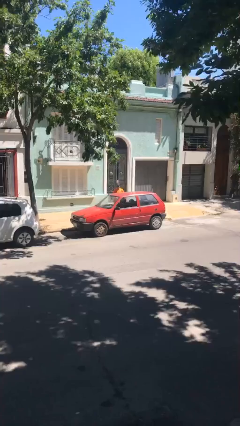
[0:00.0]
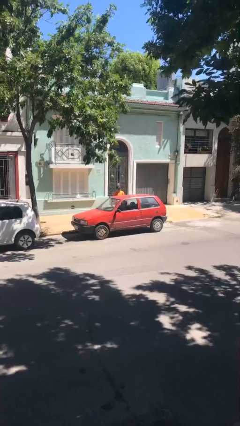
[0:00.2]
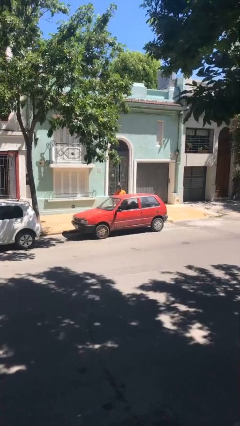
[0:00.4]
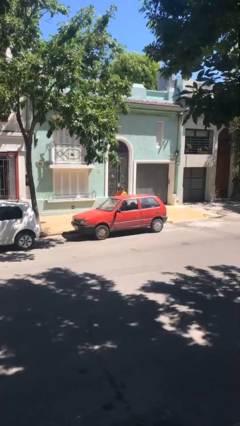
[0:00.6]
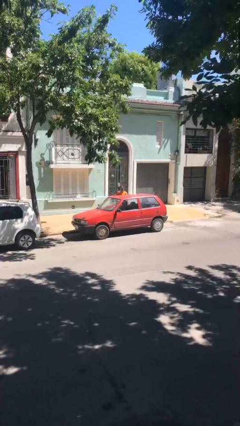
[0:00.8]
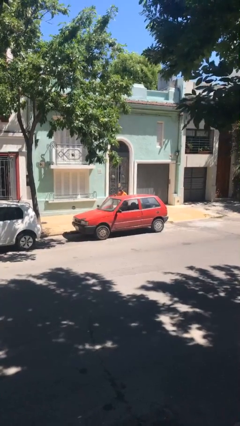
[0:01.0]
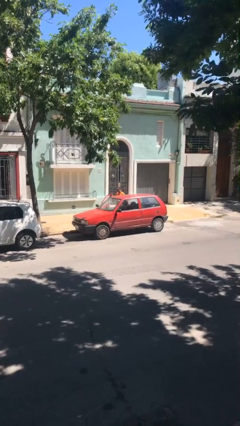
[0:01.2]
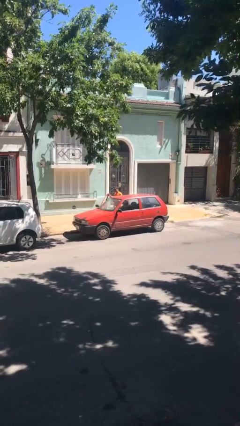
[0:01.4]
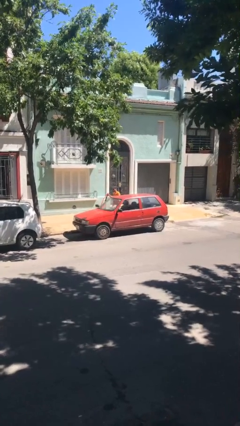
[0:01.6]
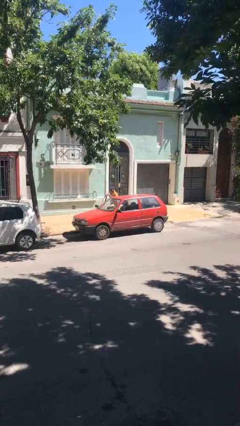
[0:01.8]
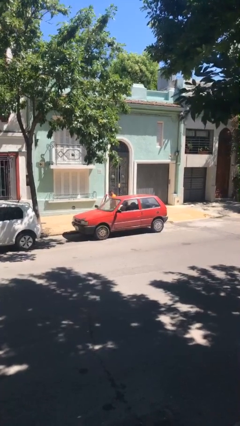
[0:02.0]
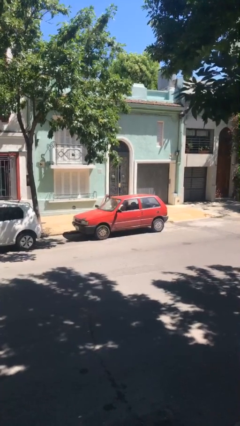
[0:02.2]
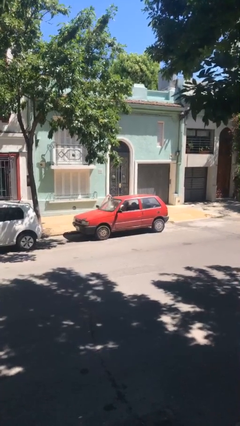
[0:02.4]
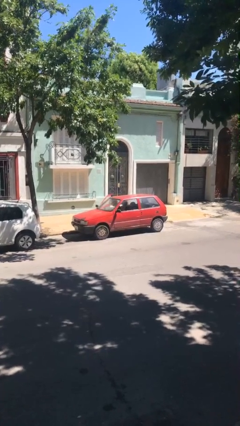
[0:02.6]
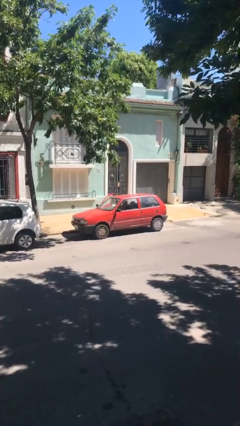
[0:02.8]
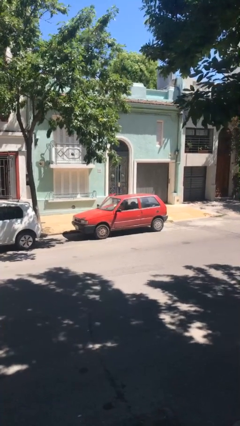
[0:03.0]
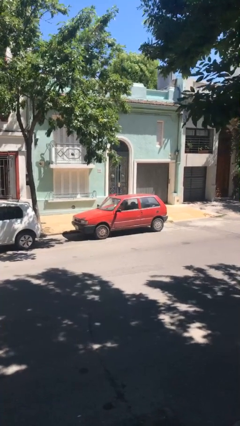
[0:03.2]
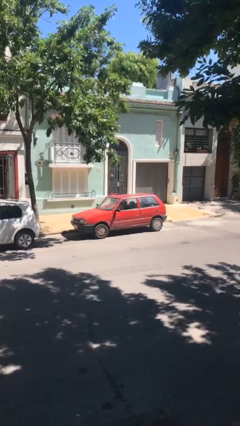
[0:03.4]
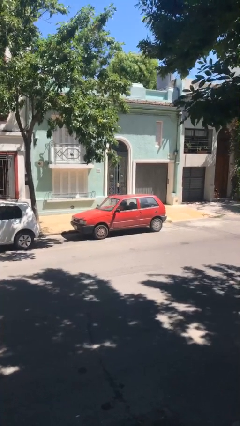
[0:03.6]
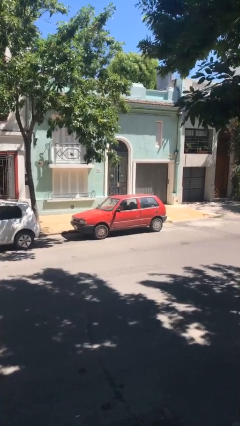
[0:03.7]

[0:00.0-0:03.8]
car picks up person

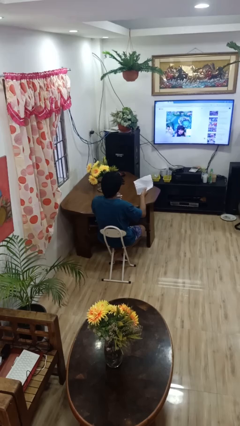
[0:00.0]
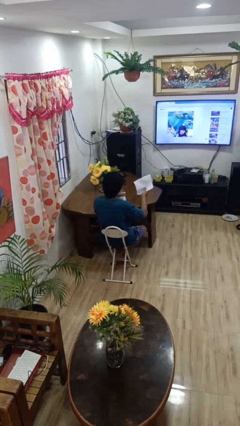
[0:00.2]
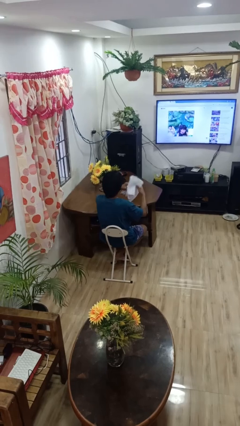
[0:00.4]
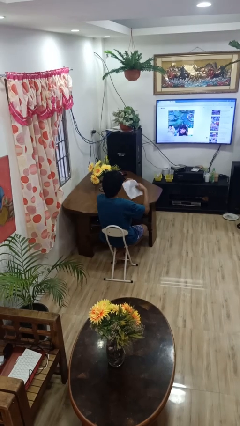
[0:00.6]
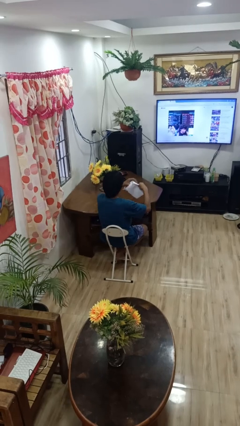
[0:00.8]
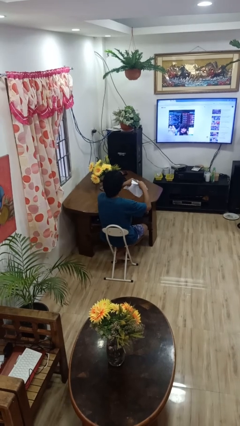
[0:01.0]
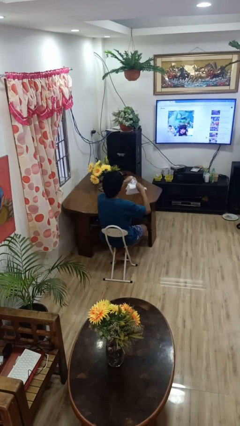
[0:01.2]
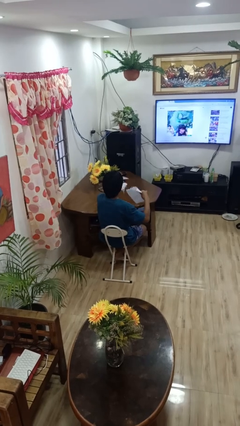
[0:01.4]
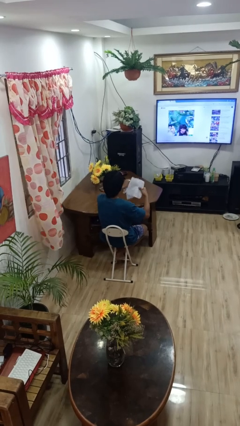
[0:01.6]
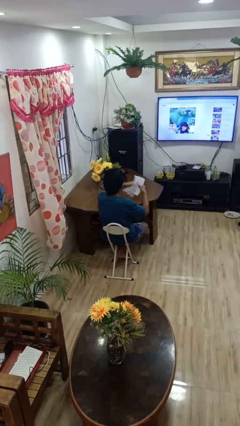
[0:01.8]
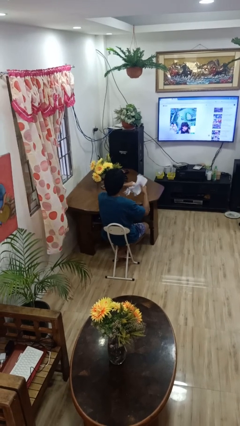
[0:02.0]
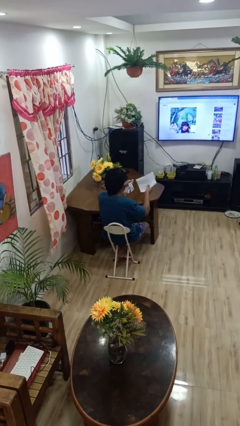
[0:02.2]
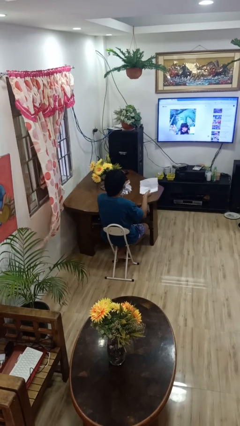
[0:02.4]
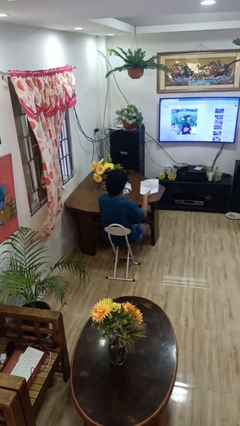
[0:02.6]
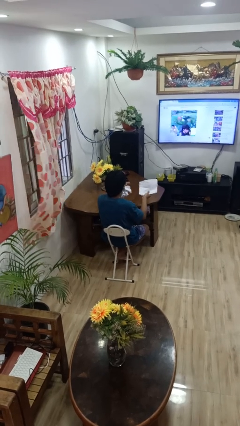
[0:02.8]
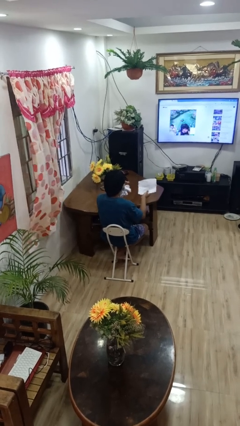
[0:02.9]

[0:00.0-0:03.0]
person tears paper

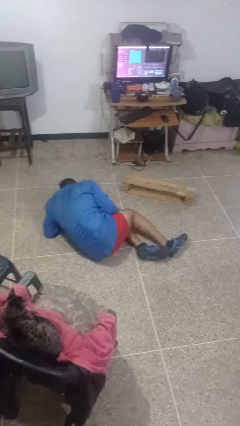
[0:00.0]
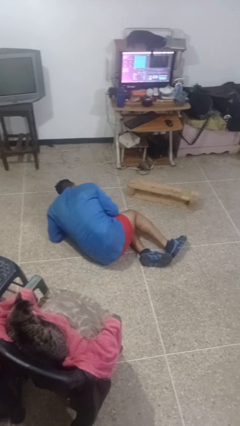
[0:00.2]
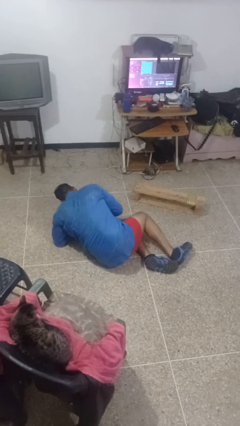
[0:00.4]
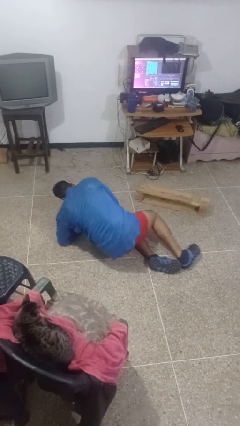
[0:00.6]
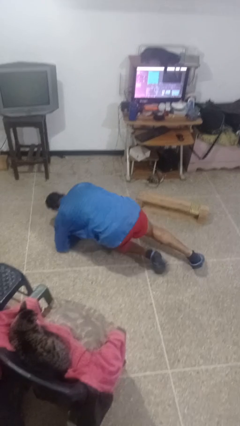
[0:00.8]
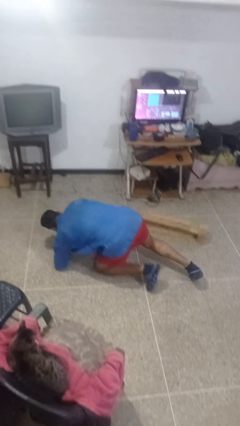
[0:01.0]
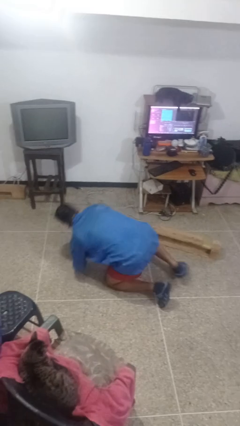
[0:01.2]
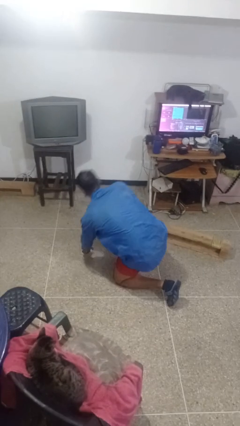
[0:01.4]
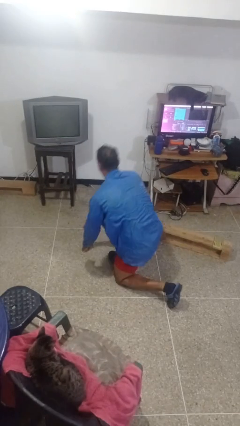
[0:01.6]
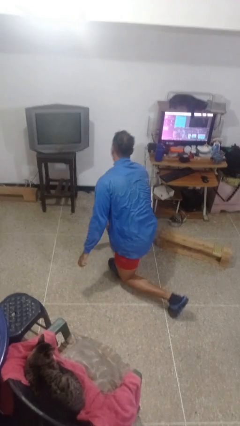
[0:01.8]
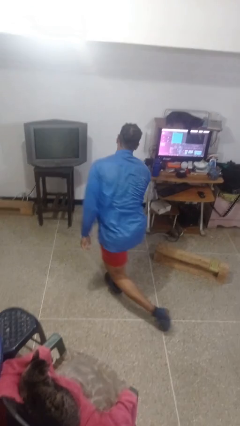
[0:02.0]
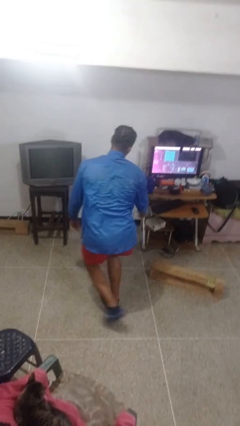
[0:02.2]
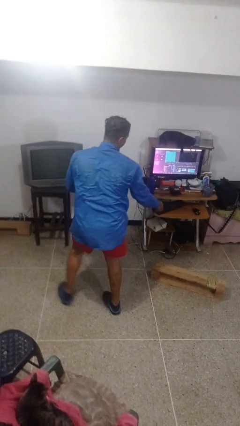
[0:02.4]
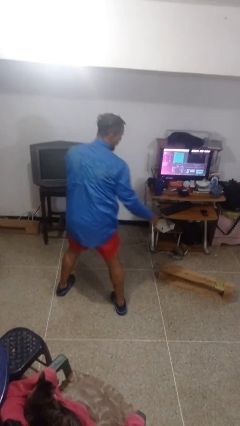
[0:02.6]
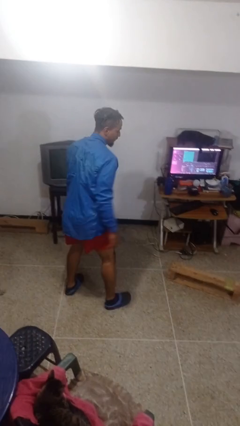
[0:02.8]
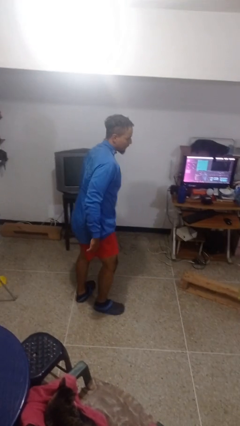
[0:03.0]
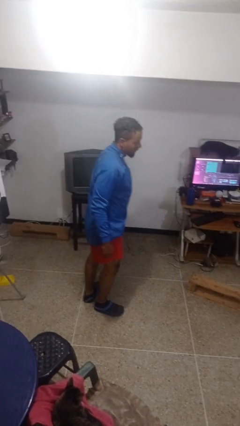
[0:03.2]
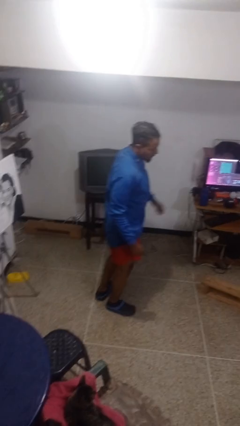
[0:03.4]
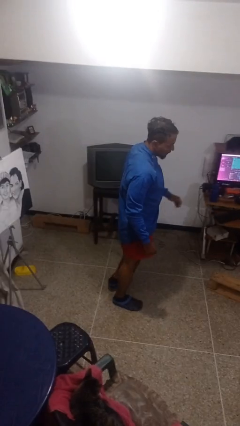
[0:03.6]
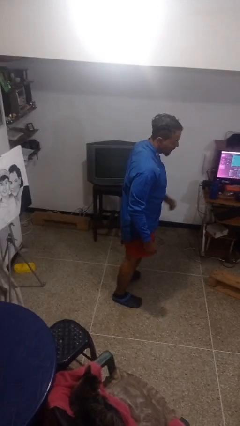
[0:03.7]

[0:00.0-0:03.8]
person stands up from floor

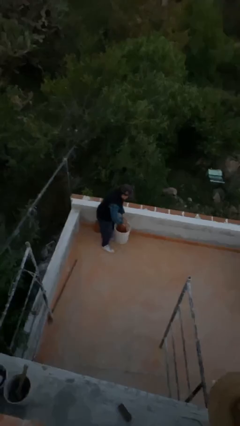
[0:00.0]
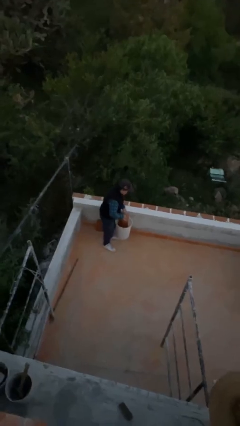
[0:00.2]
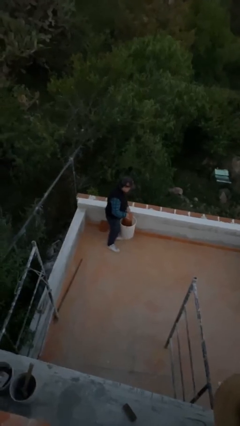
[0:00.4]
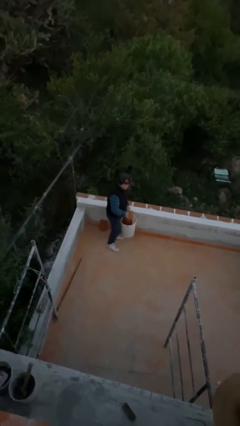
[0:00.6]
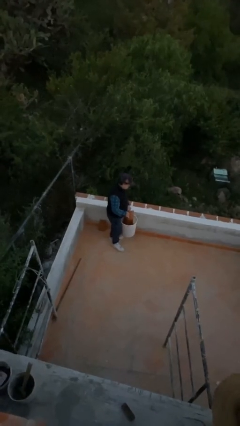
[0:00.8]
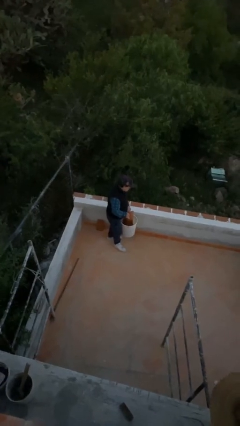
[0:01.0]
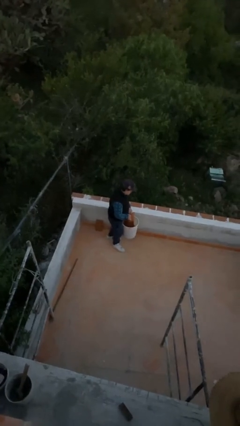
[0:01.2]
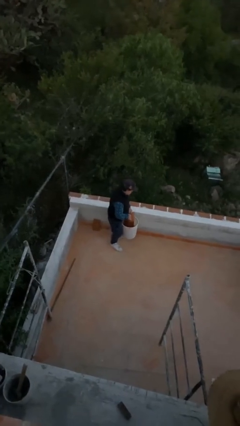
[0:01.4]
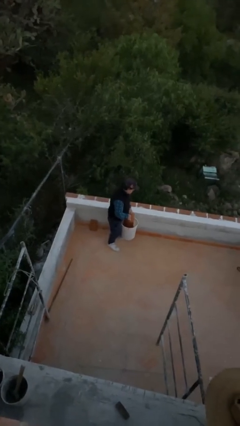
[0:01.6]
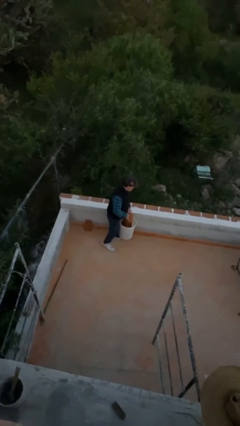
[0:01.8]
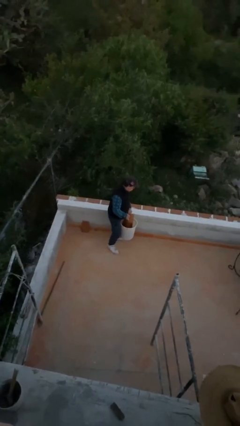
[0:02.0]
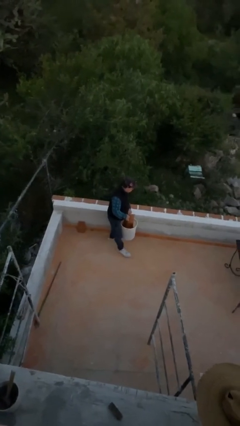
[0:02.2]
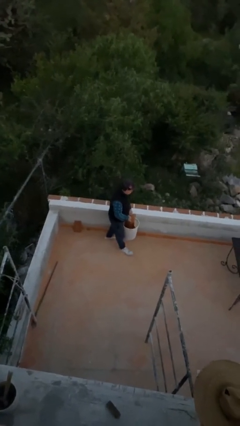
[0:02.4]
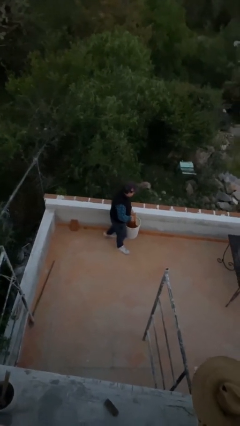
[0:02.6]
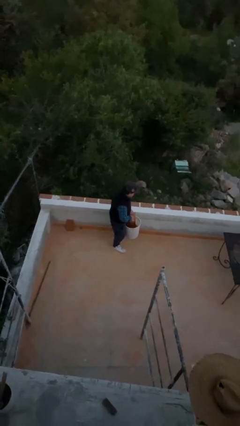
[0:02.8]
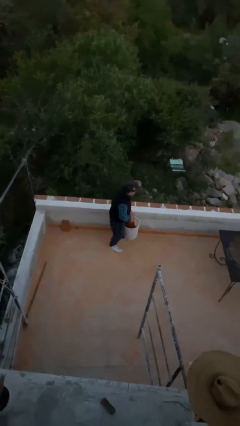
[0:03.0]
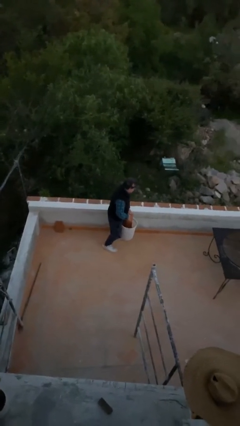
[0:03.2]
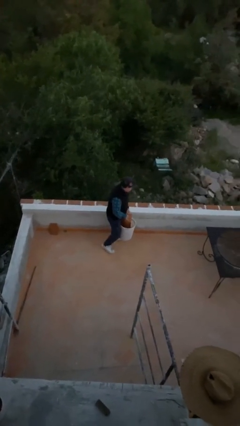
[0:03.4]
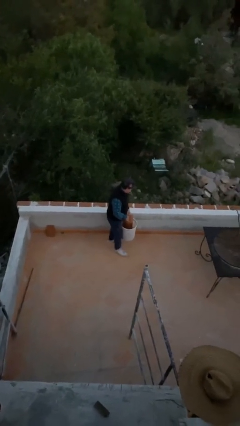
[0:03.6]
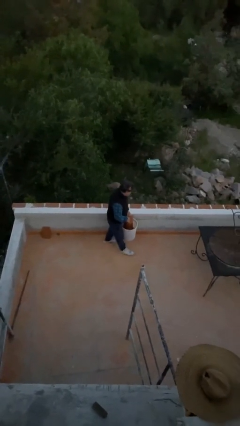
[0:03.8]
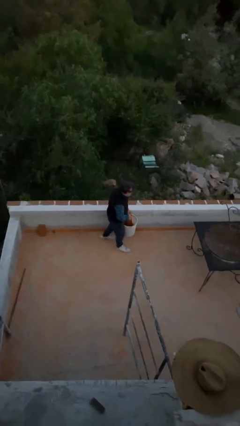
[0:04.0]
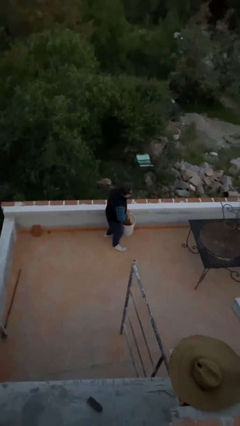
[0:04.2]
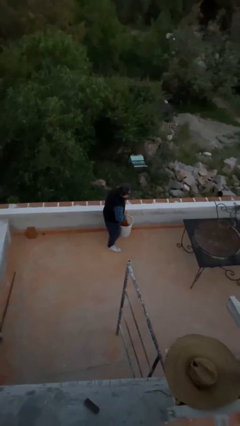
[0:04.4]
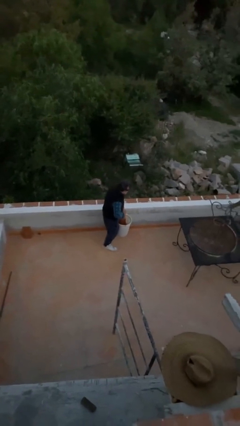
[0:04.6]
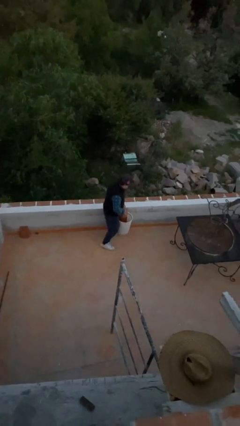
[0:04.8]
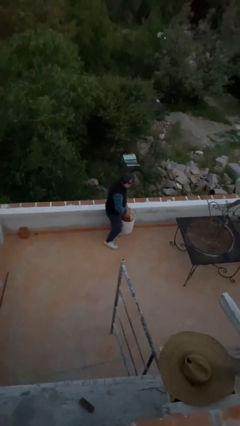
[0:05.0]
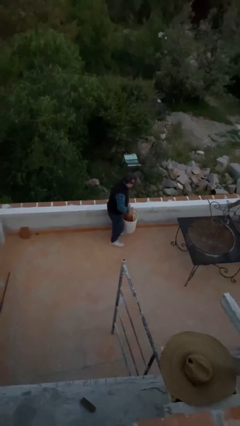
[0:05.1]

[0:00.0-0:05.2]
person carries heavy object

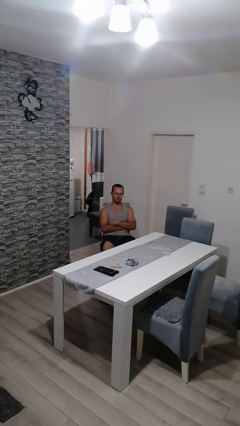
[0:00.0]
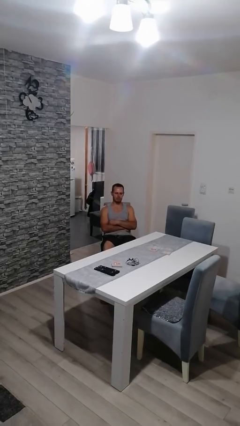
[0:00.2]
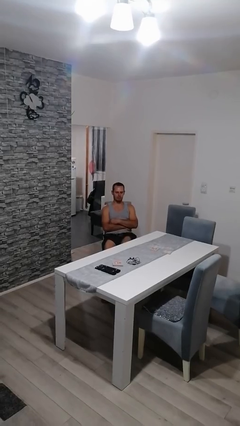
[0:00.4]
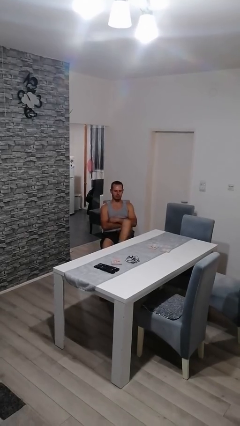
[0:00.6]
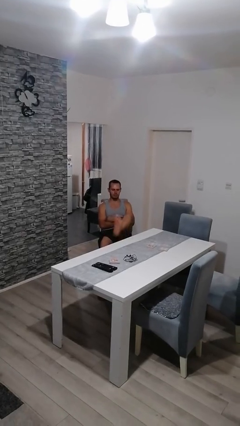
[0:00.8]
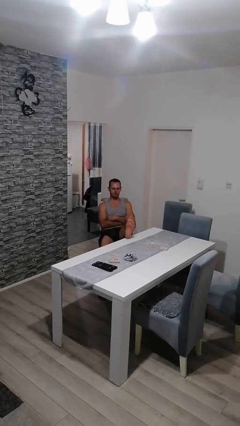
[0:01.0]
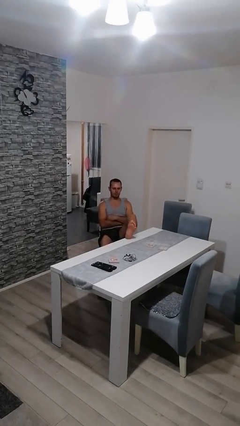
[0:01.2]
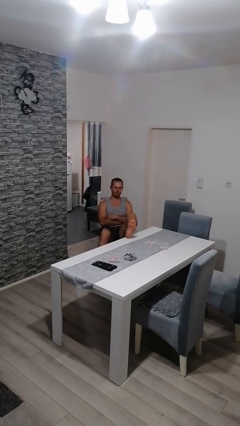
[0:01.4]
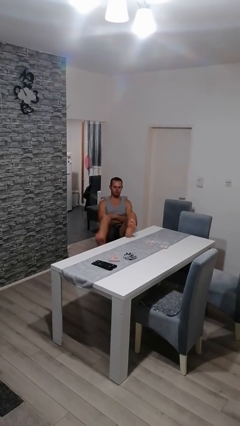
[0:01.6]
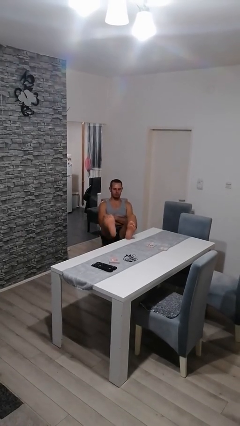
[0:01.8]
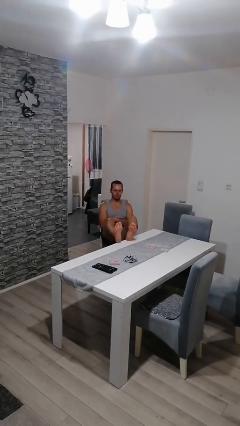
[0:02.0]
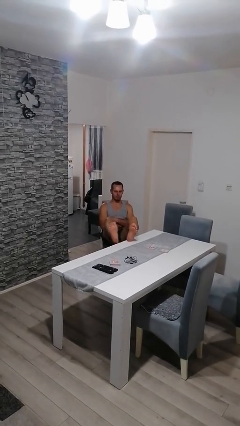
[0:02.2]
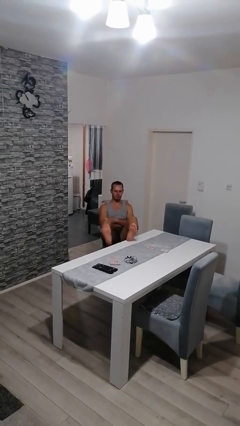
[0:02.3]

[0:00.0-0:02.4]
person puts feet up
